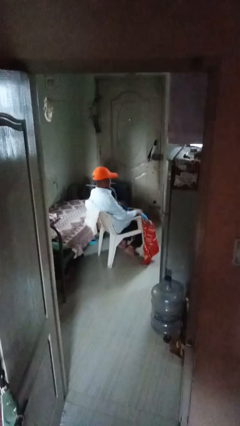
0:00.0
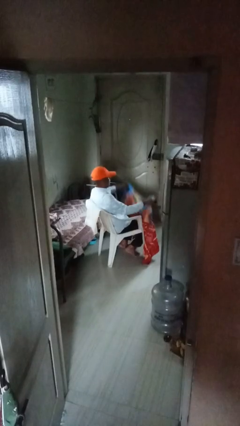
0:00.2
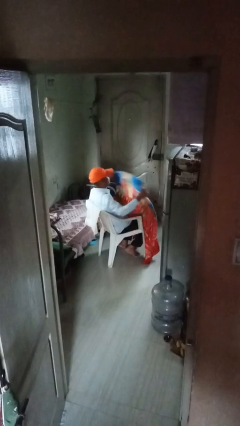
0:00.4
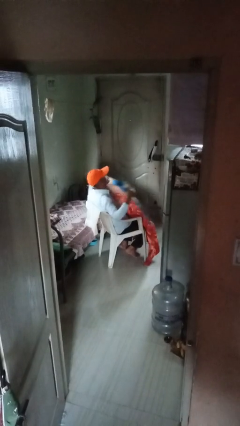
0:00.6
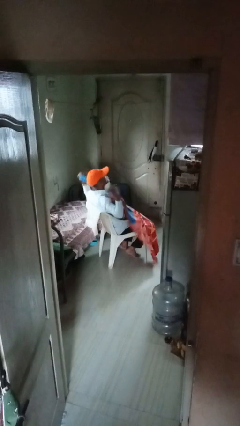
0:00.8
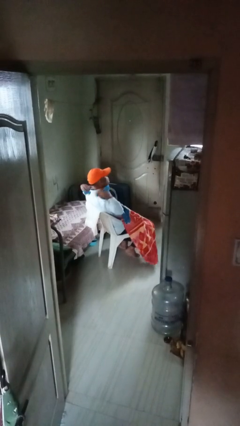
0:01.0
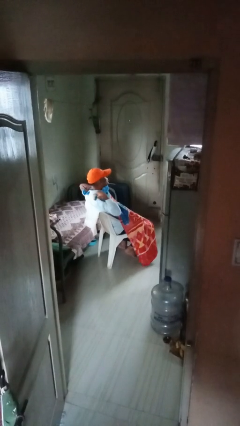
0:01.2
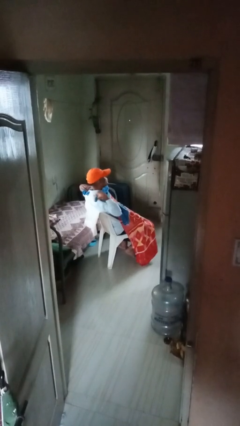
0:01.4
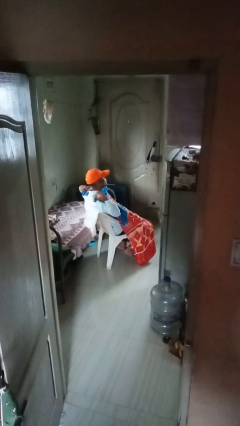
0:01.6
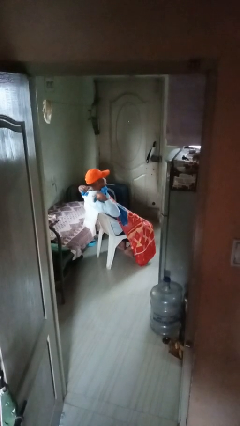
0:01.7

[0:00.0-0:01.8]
person covers with blanket

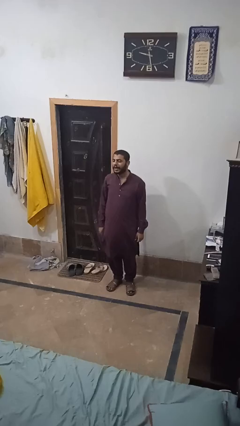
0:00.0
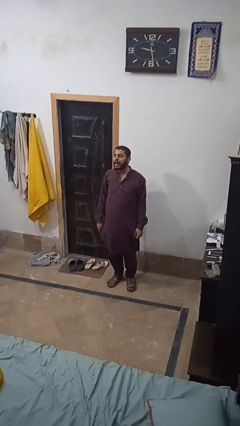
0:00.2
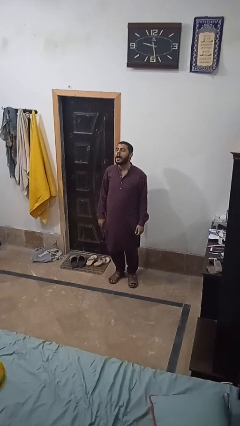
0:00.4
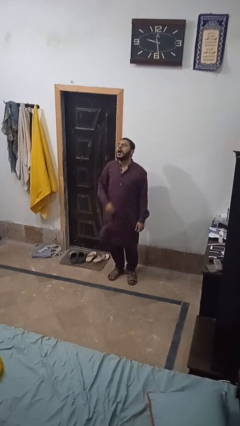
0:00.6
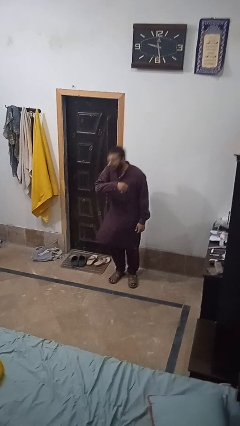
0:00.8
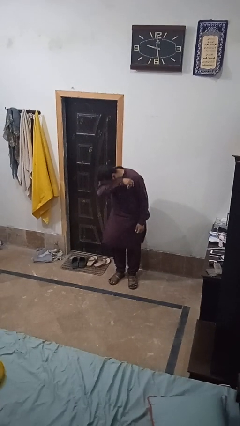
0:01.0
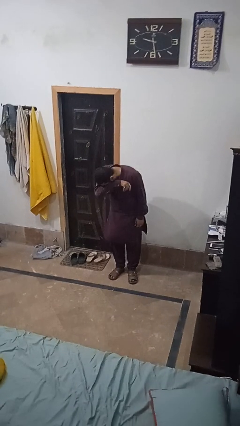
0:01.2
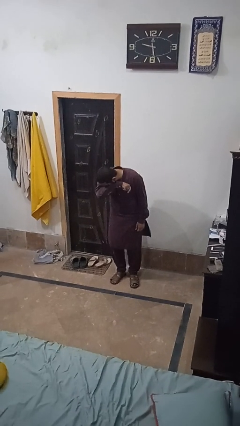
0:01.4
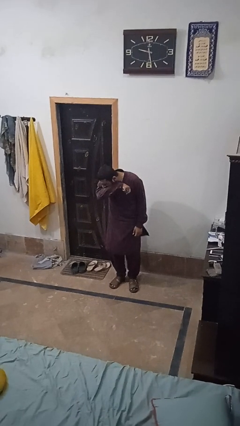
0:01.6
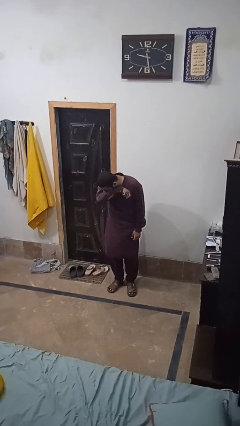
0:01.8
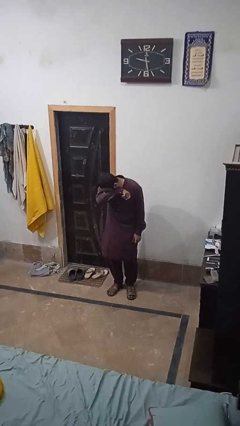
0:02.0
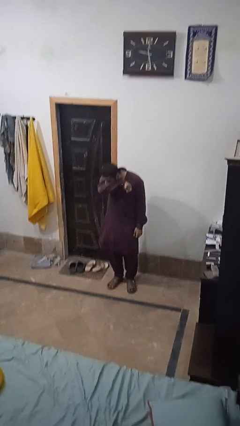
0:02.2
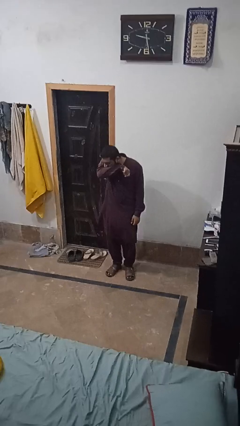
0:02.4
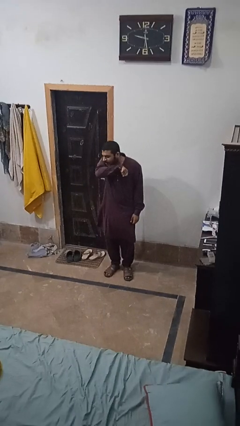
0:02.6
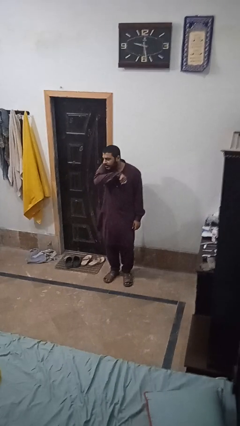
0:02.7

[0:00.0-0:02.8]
person sneezes into arm

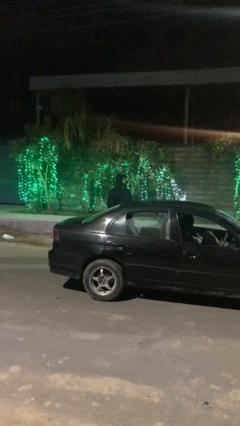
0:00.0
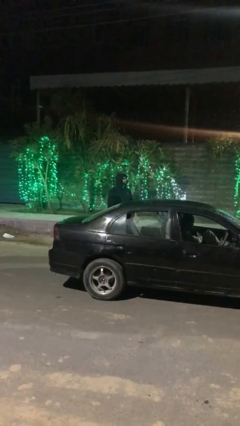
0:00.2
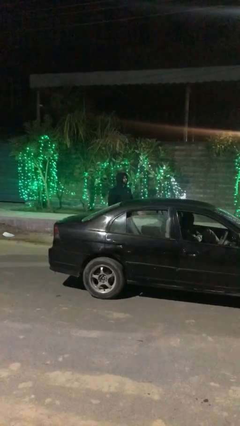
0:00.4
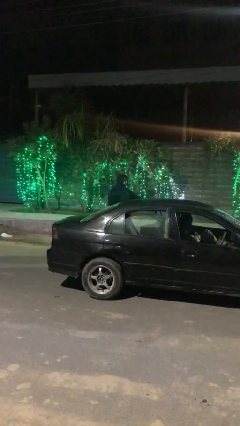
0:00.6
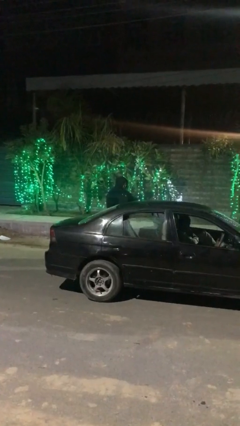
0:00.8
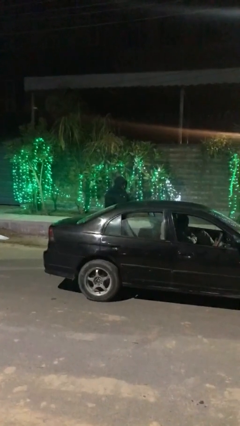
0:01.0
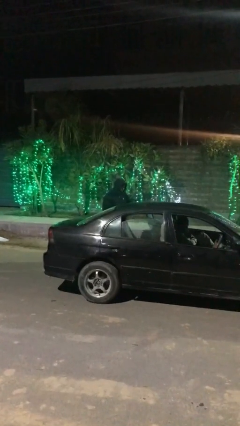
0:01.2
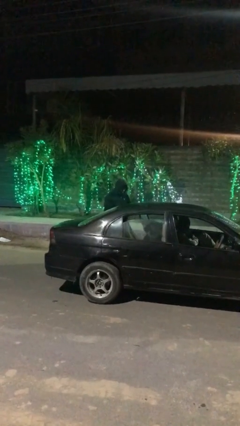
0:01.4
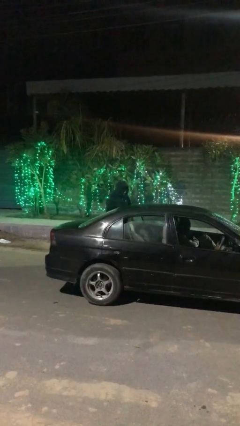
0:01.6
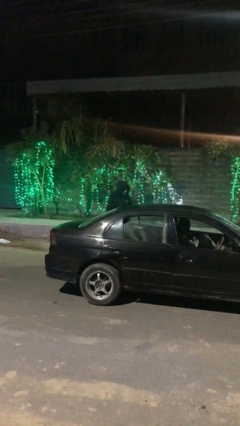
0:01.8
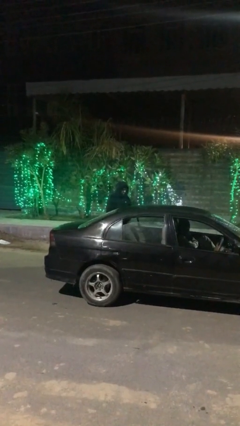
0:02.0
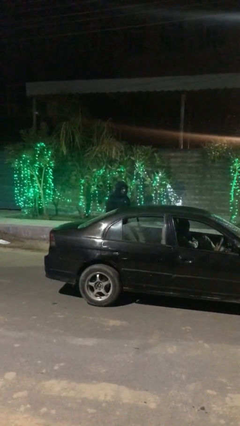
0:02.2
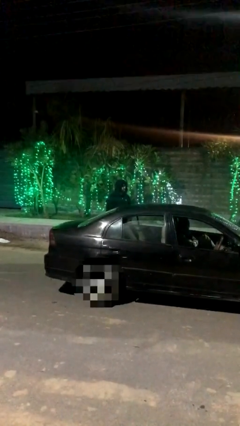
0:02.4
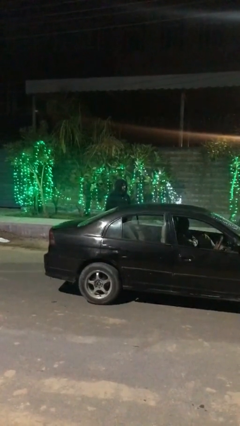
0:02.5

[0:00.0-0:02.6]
person closes car door

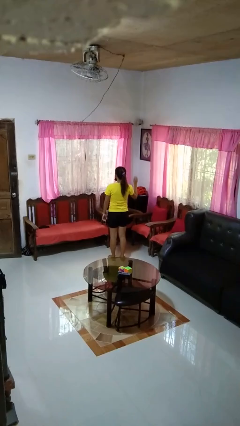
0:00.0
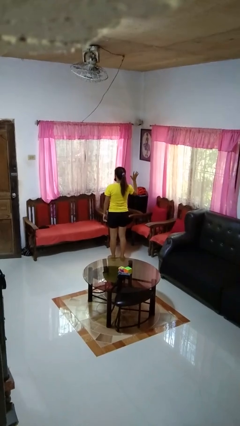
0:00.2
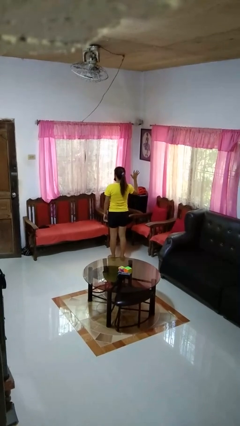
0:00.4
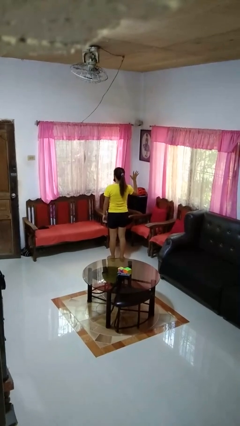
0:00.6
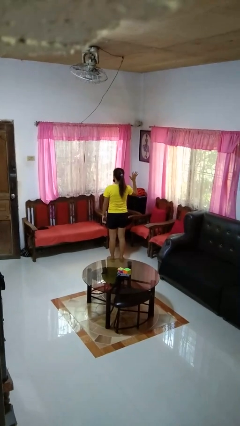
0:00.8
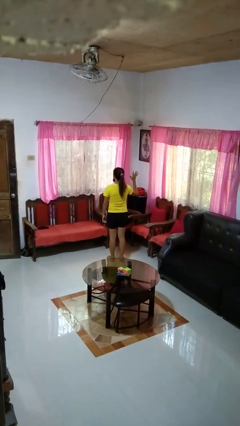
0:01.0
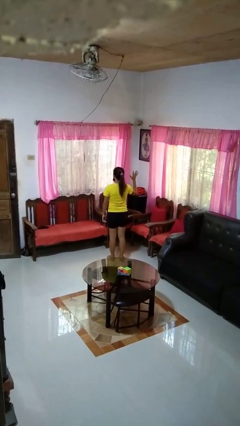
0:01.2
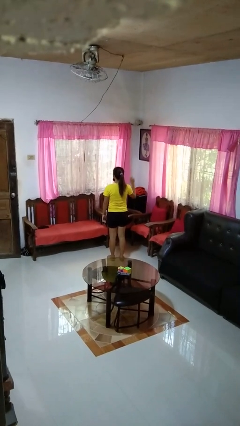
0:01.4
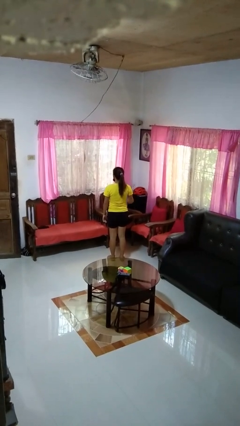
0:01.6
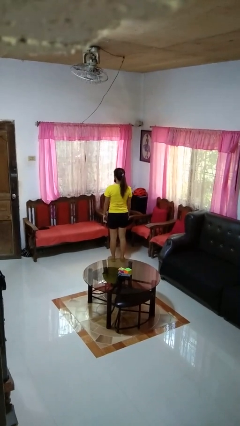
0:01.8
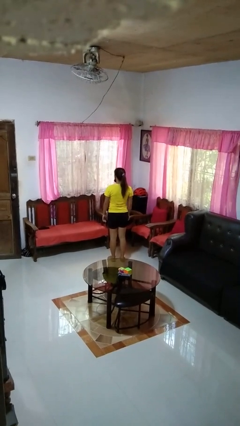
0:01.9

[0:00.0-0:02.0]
person gestures number five

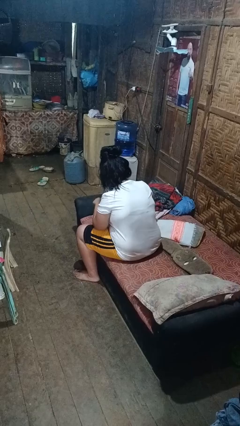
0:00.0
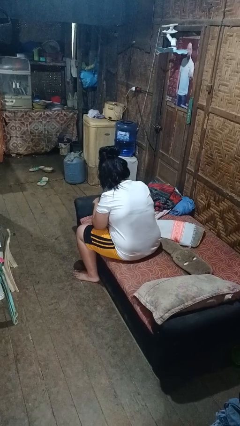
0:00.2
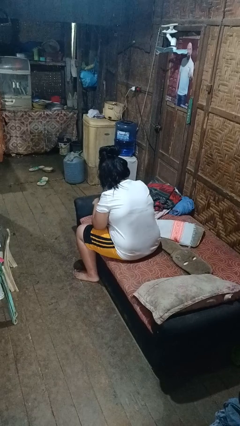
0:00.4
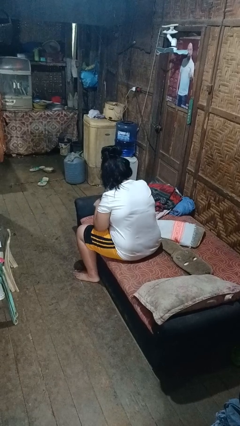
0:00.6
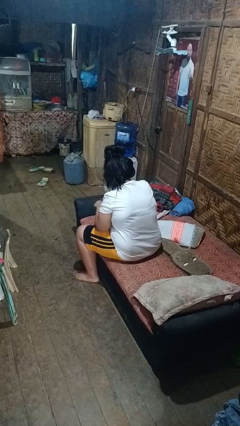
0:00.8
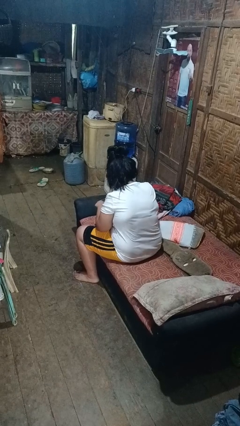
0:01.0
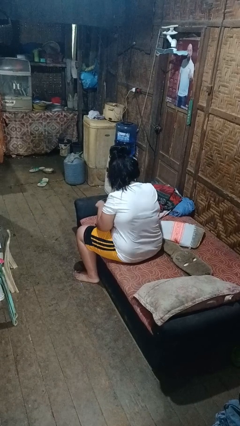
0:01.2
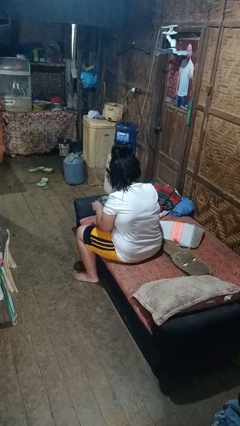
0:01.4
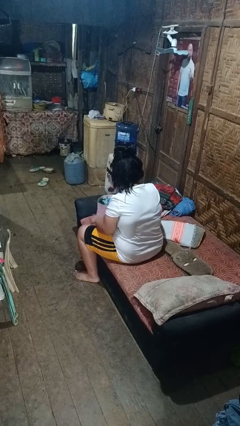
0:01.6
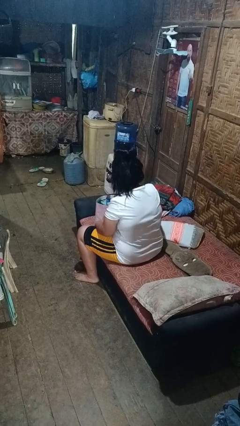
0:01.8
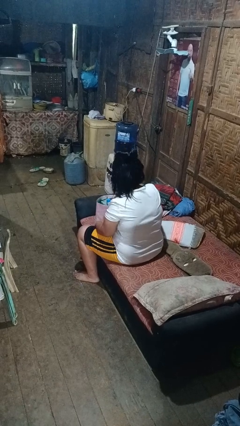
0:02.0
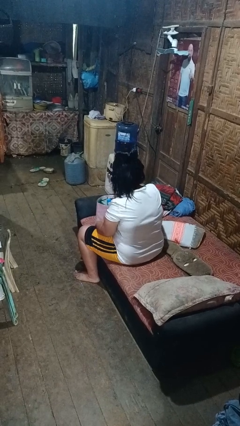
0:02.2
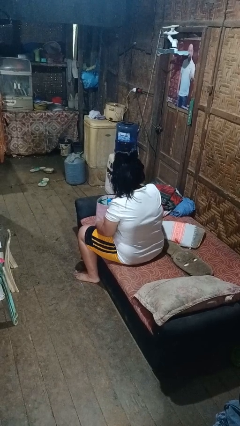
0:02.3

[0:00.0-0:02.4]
person searches in bag

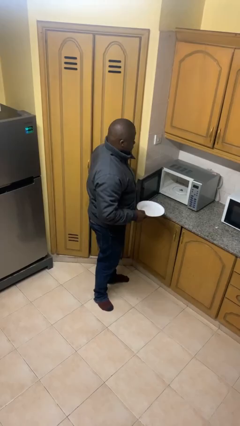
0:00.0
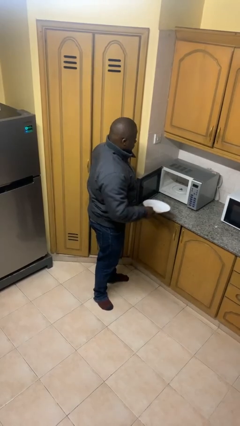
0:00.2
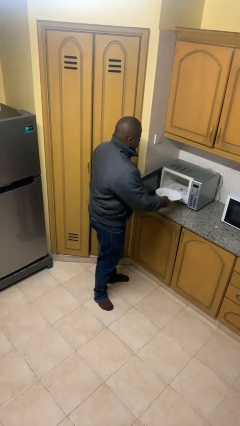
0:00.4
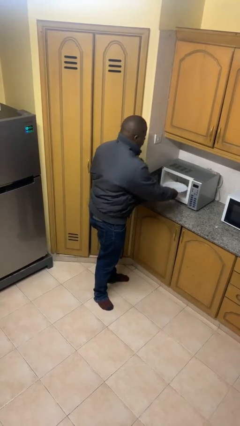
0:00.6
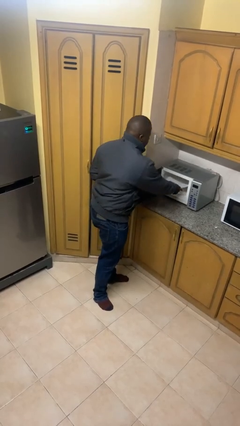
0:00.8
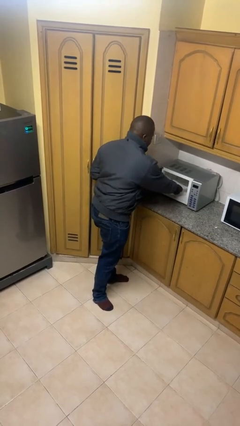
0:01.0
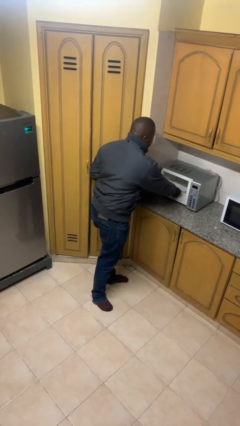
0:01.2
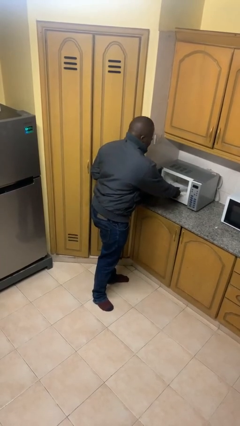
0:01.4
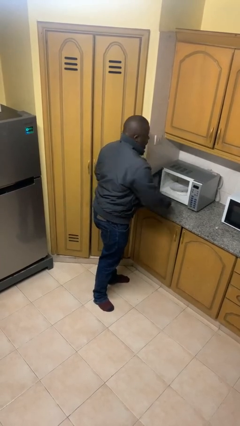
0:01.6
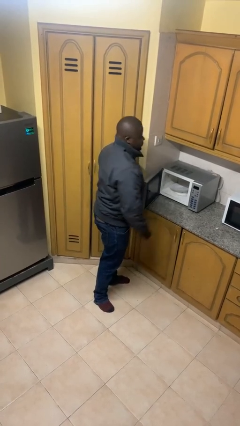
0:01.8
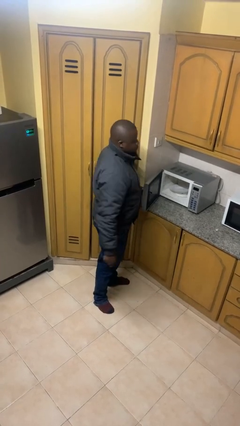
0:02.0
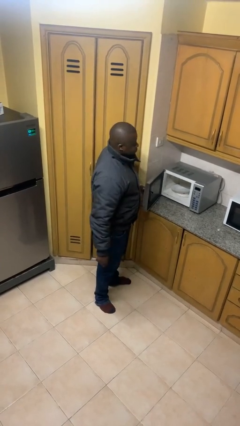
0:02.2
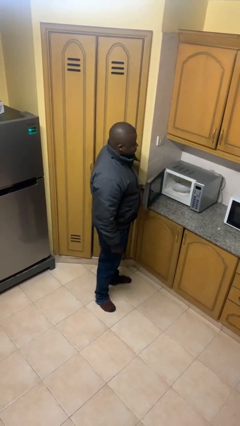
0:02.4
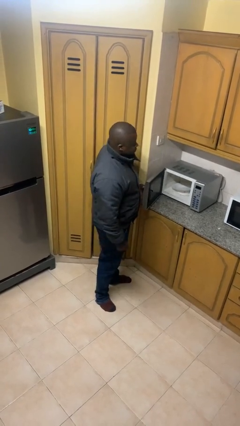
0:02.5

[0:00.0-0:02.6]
person puts object into microwave

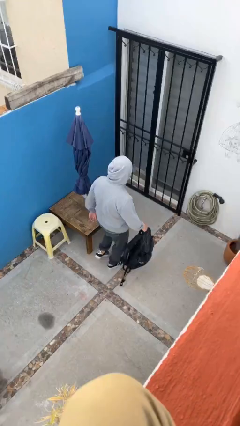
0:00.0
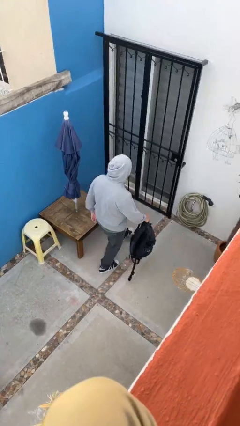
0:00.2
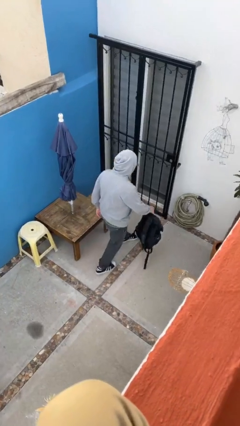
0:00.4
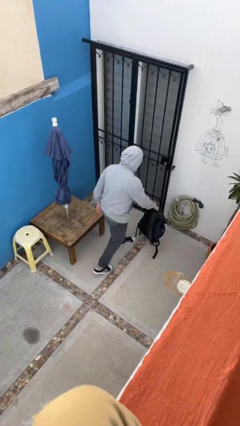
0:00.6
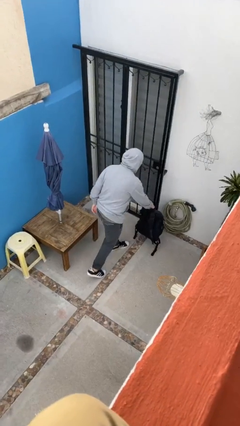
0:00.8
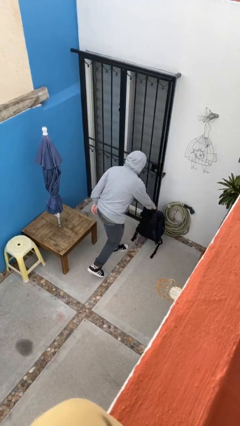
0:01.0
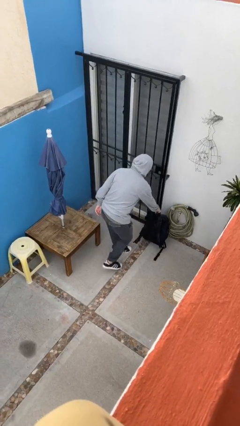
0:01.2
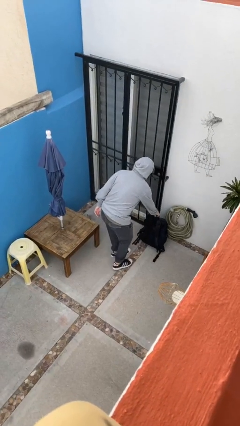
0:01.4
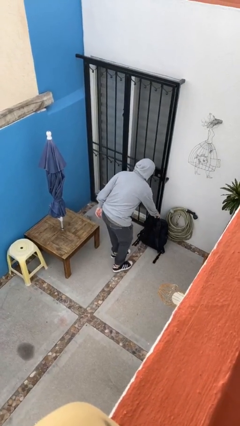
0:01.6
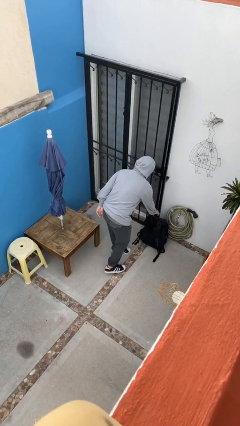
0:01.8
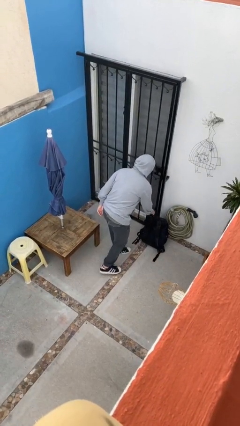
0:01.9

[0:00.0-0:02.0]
person puts down object on floor

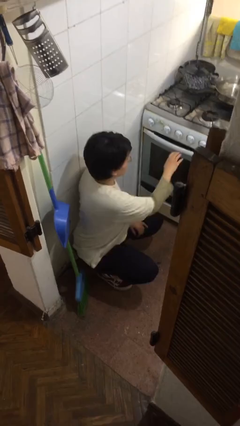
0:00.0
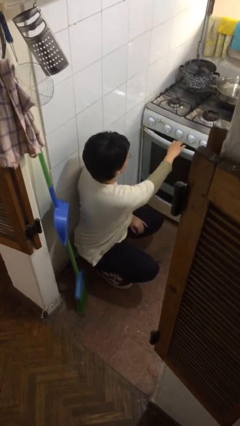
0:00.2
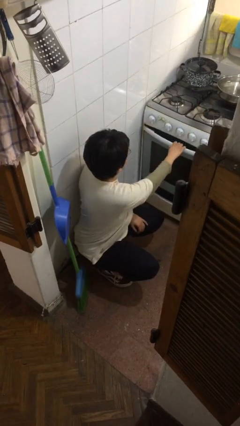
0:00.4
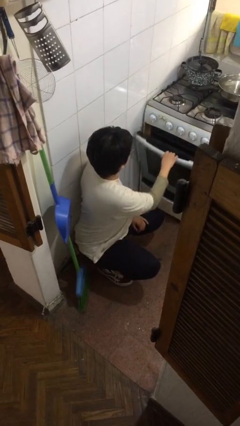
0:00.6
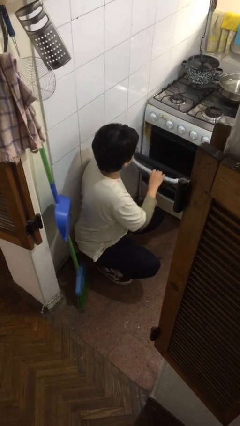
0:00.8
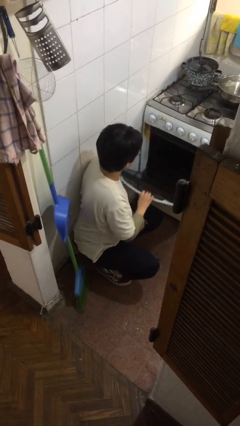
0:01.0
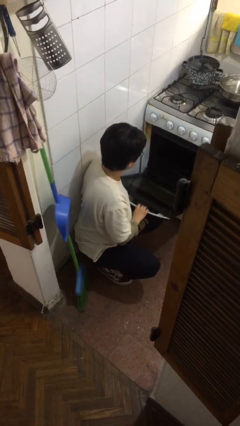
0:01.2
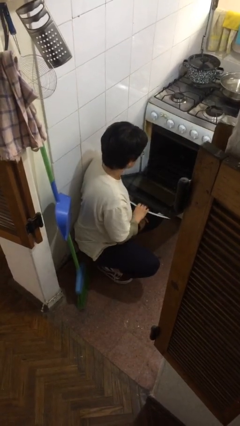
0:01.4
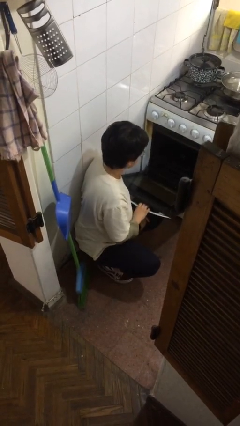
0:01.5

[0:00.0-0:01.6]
person opens oven door
